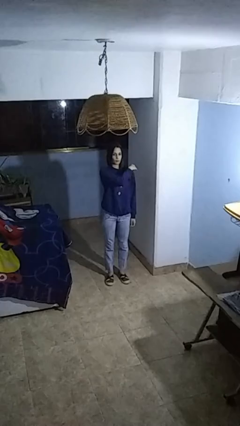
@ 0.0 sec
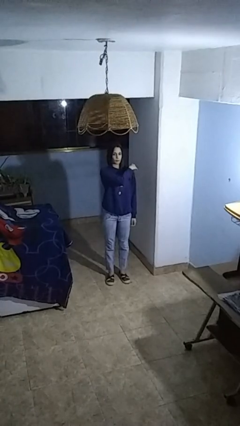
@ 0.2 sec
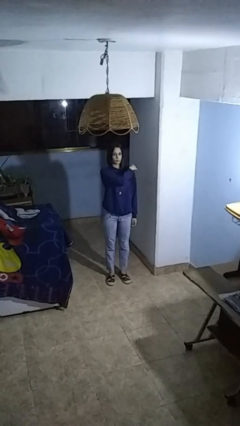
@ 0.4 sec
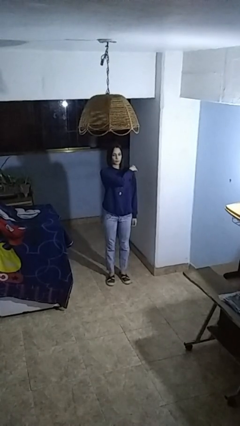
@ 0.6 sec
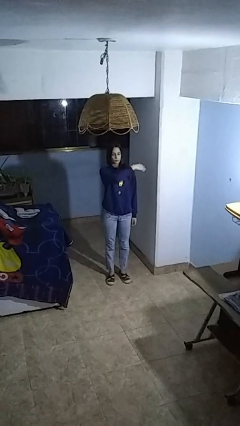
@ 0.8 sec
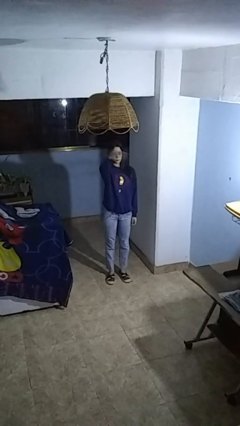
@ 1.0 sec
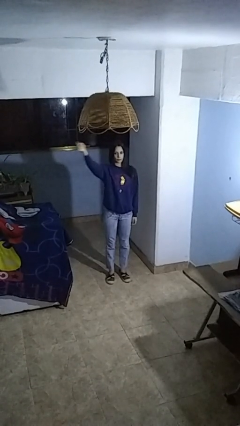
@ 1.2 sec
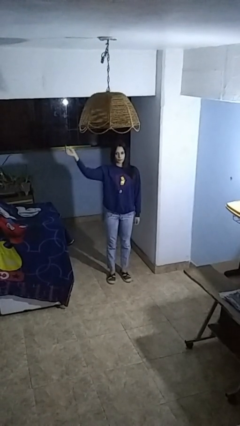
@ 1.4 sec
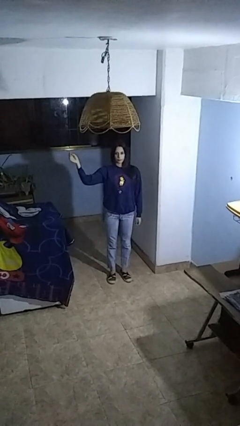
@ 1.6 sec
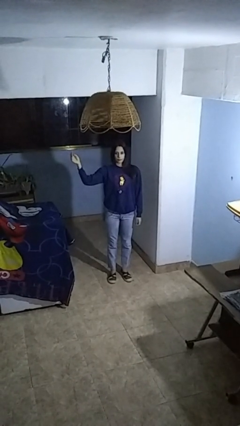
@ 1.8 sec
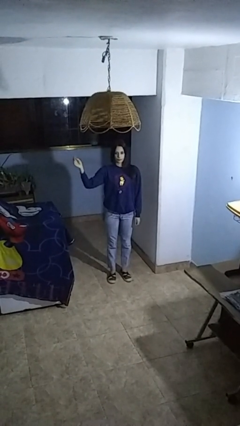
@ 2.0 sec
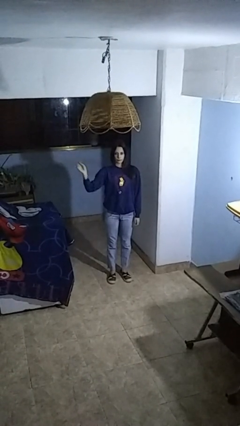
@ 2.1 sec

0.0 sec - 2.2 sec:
person gestures swipe right

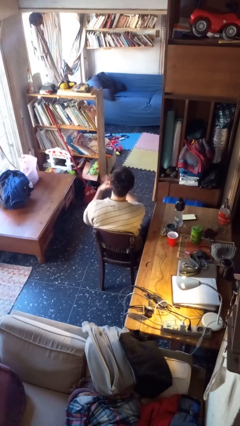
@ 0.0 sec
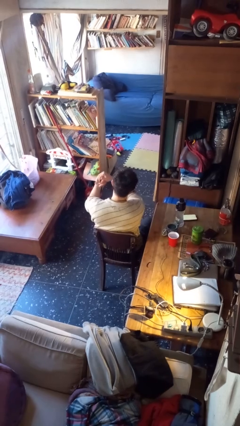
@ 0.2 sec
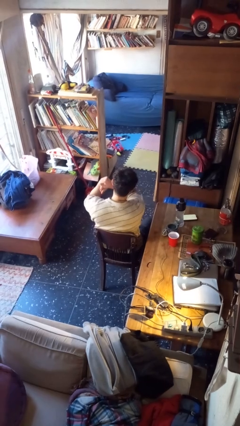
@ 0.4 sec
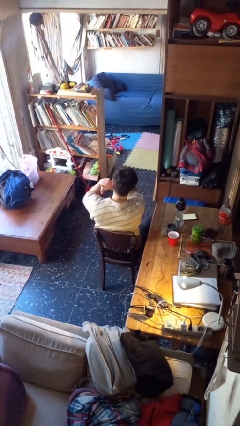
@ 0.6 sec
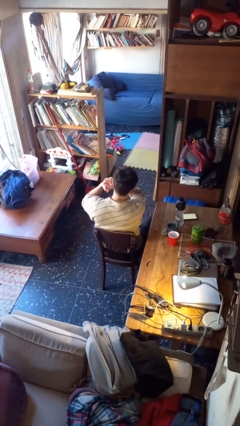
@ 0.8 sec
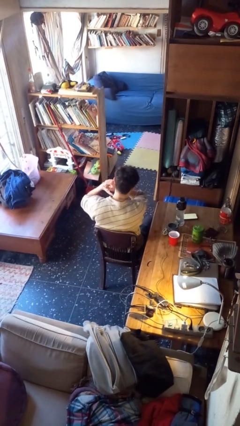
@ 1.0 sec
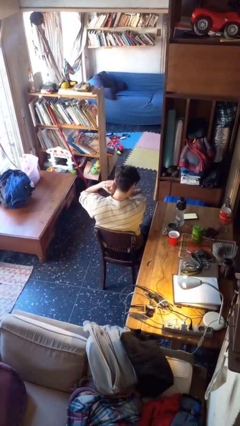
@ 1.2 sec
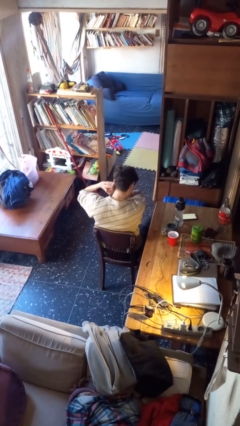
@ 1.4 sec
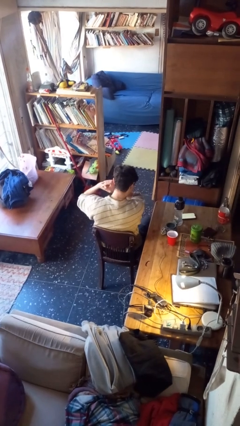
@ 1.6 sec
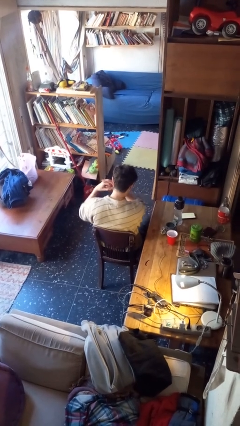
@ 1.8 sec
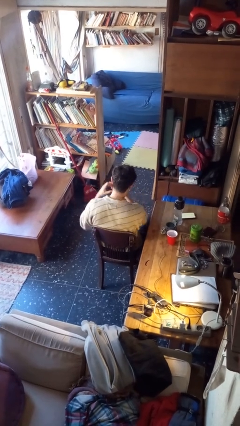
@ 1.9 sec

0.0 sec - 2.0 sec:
person snaps fingers

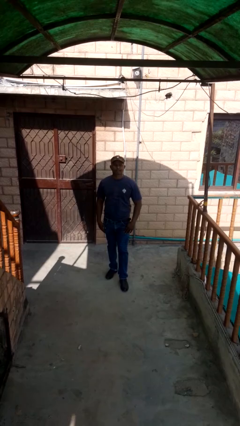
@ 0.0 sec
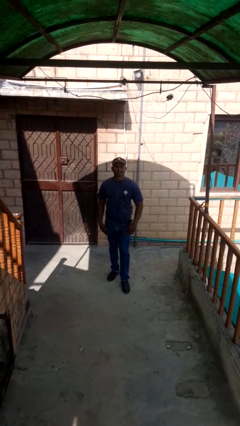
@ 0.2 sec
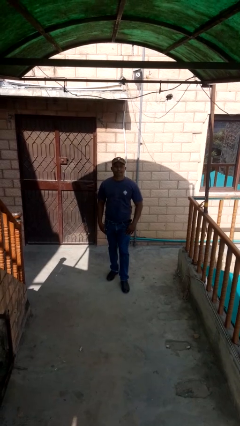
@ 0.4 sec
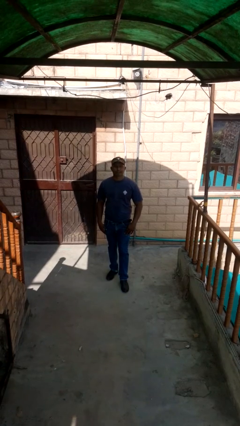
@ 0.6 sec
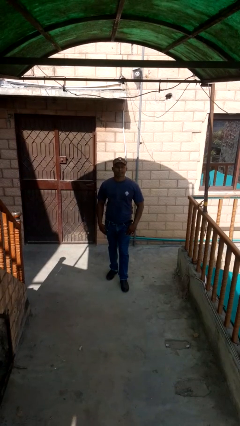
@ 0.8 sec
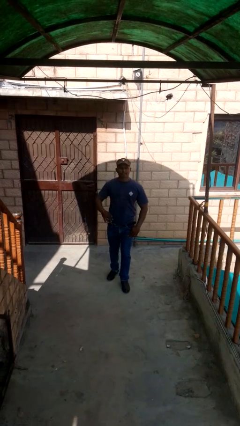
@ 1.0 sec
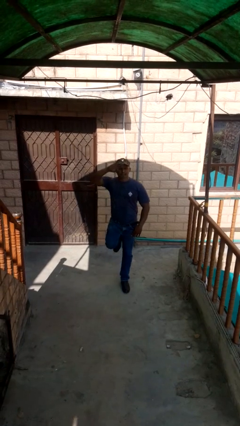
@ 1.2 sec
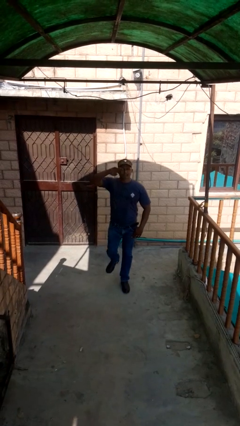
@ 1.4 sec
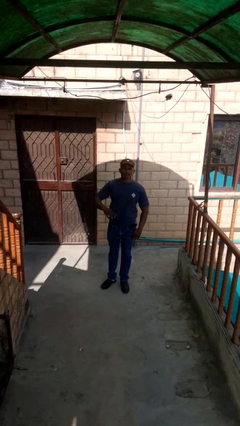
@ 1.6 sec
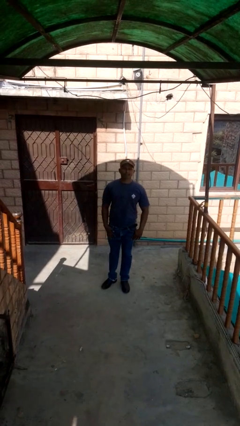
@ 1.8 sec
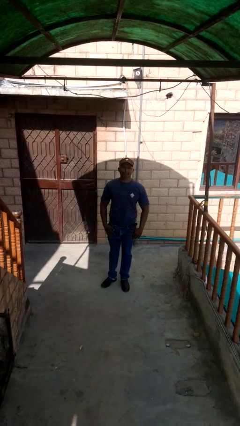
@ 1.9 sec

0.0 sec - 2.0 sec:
person salutes

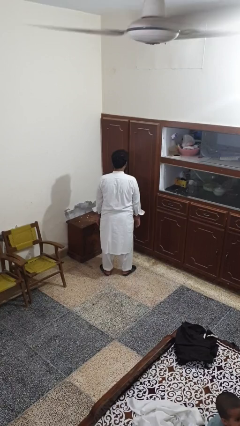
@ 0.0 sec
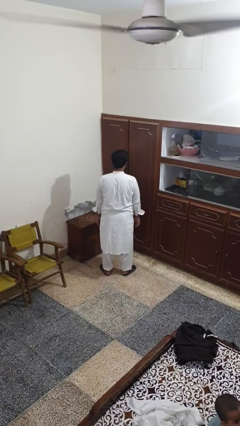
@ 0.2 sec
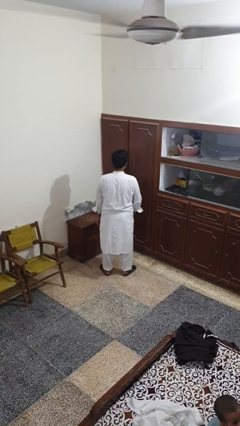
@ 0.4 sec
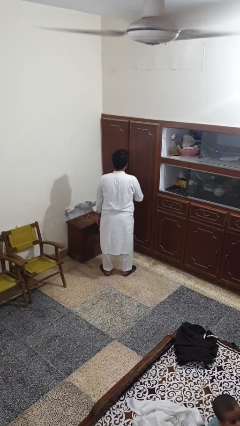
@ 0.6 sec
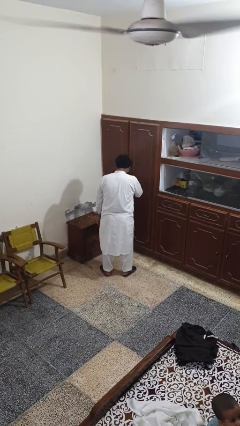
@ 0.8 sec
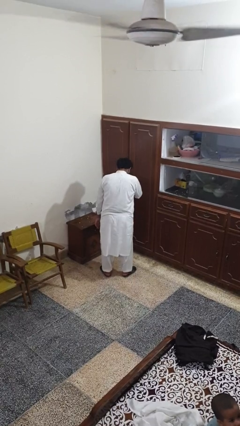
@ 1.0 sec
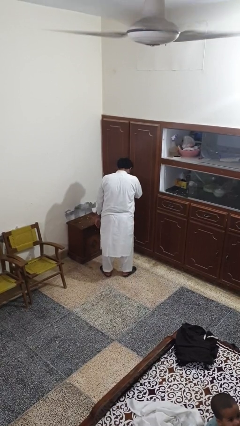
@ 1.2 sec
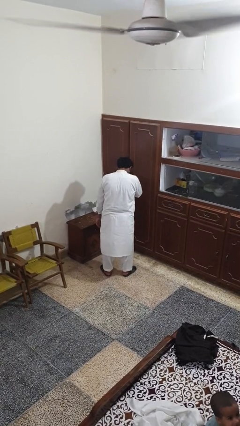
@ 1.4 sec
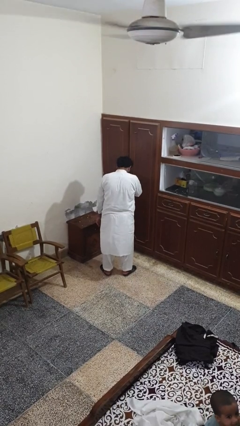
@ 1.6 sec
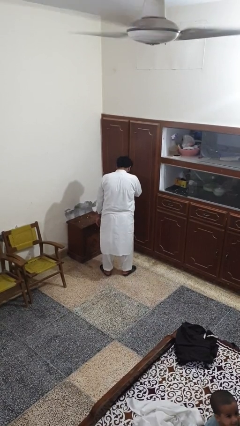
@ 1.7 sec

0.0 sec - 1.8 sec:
person sneezes into hand

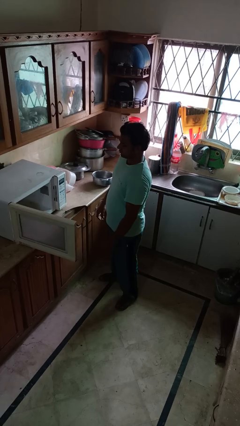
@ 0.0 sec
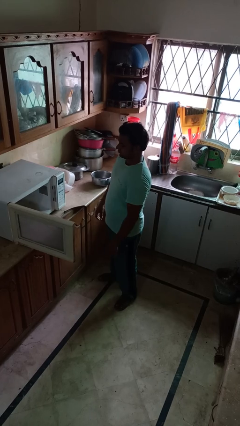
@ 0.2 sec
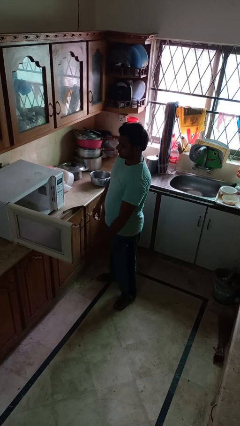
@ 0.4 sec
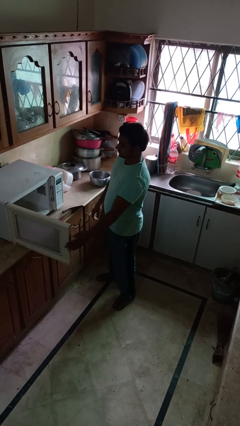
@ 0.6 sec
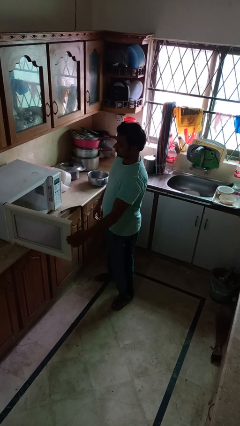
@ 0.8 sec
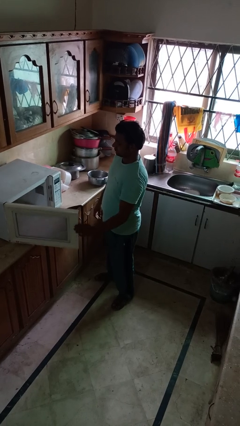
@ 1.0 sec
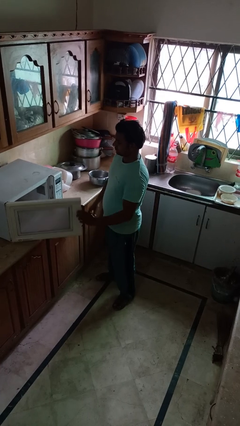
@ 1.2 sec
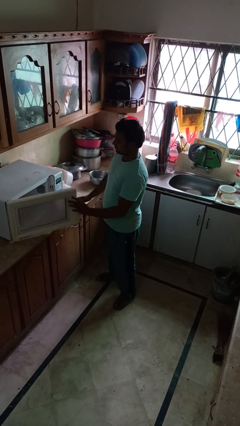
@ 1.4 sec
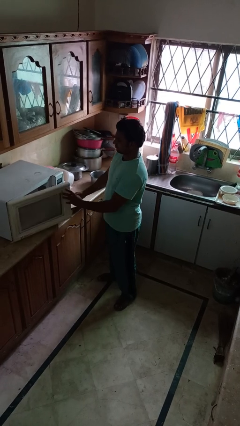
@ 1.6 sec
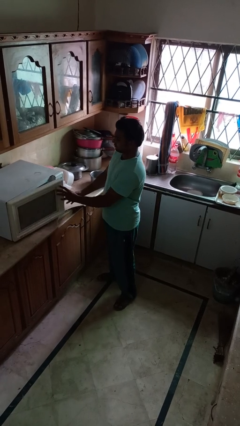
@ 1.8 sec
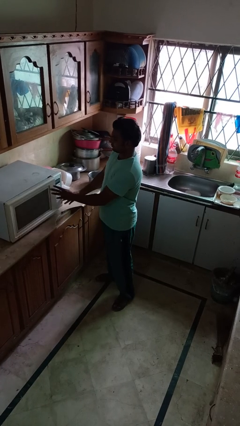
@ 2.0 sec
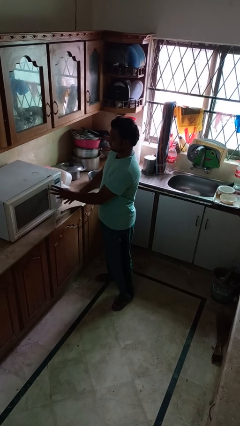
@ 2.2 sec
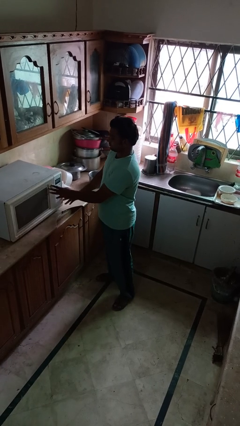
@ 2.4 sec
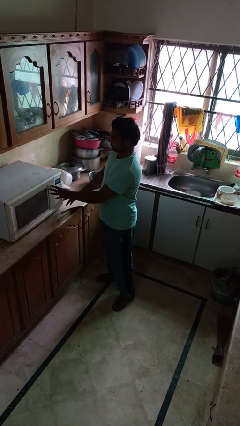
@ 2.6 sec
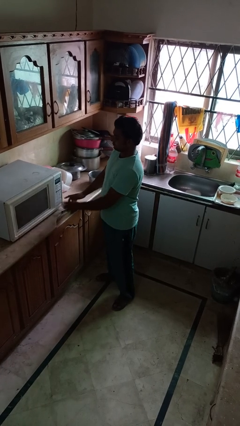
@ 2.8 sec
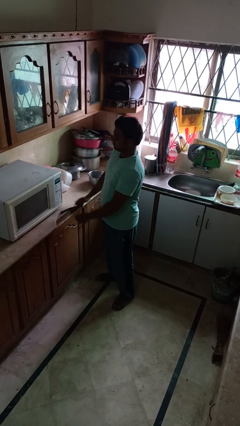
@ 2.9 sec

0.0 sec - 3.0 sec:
person closes microwave

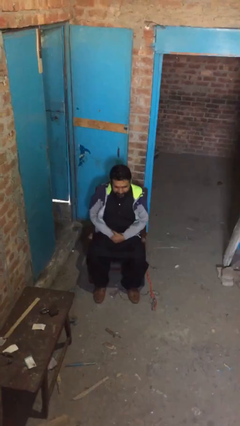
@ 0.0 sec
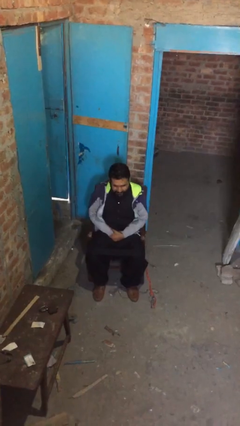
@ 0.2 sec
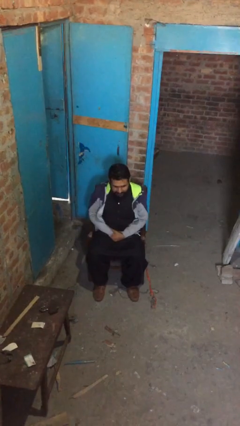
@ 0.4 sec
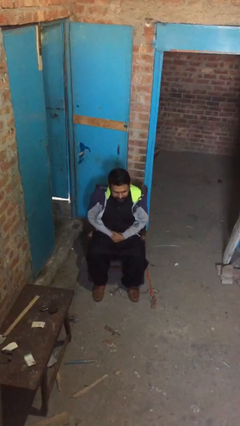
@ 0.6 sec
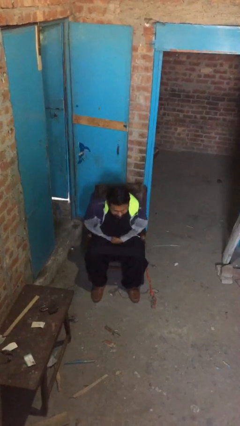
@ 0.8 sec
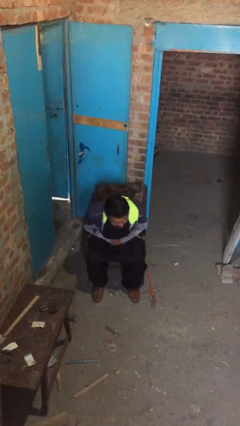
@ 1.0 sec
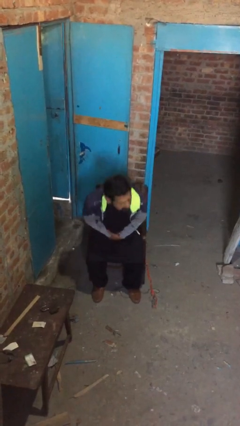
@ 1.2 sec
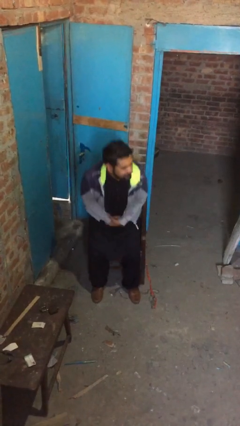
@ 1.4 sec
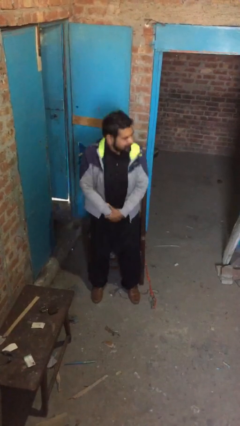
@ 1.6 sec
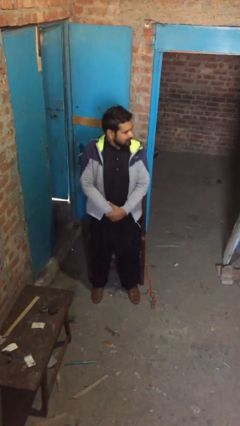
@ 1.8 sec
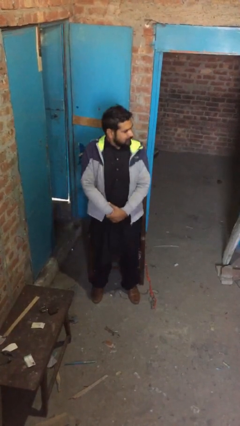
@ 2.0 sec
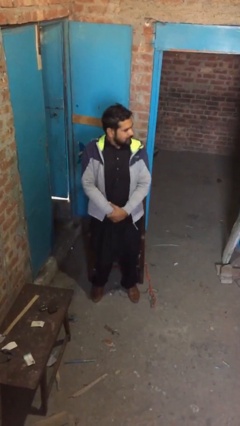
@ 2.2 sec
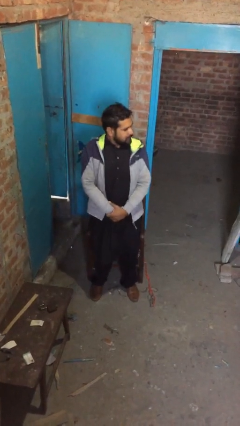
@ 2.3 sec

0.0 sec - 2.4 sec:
person stands up

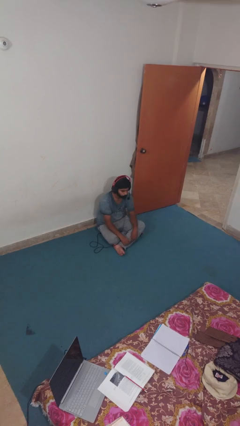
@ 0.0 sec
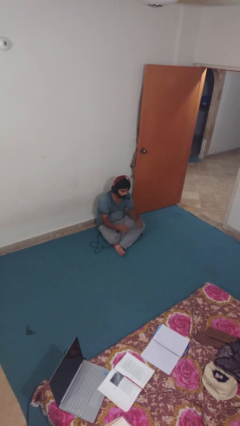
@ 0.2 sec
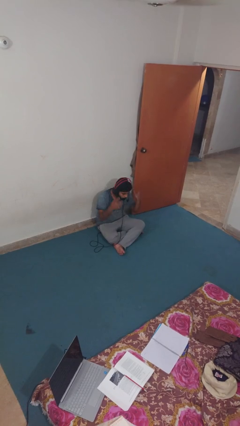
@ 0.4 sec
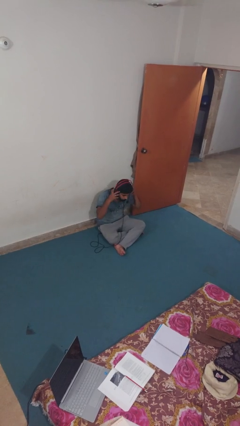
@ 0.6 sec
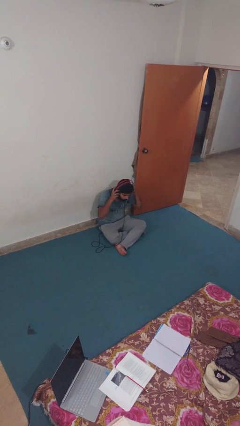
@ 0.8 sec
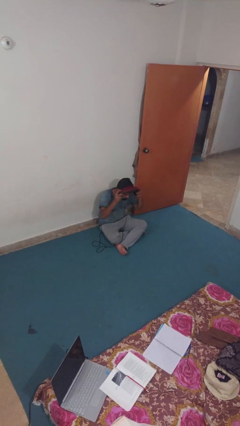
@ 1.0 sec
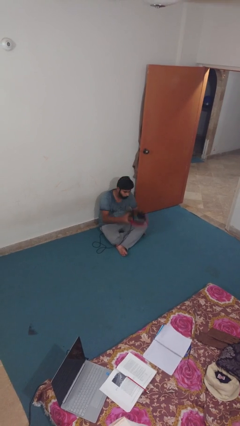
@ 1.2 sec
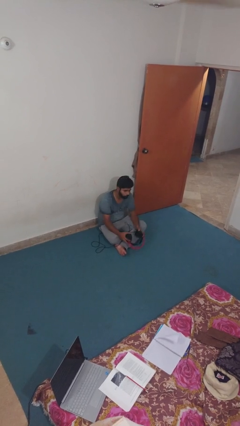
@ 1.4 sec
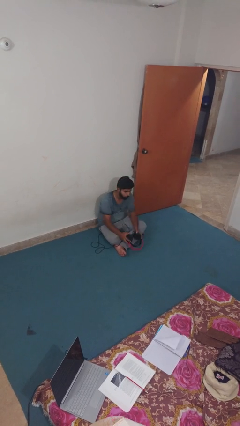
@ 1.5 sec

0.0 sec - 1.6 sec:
person takes off headphones

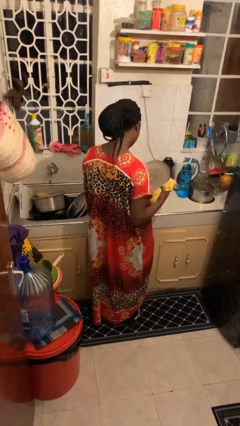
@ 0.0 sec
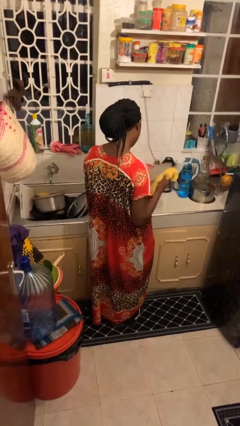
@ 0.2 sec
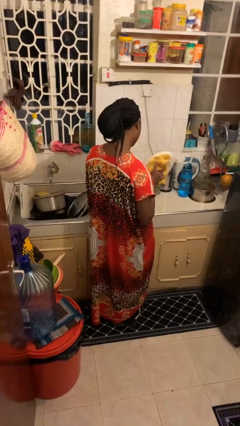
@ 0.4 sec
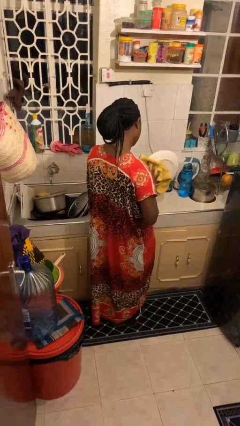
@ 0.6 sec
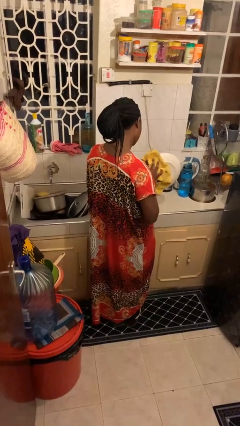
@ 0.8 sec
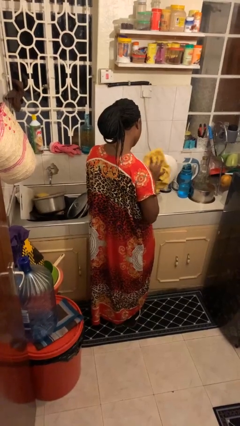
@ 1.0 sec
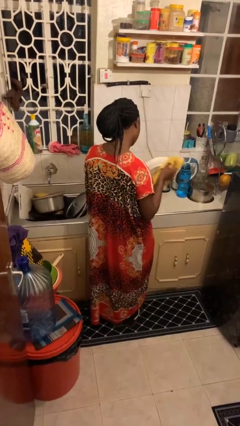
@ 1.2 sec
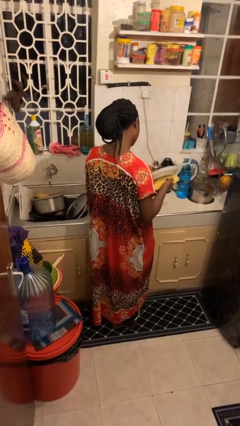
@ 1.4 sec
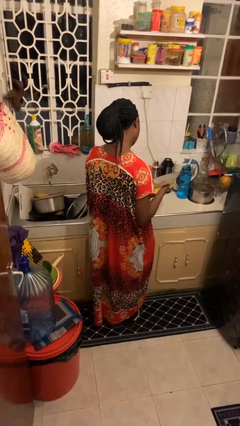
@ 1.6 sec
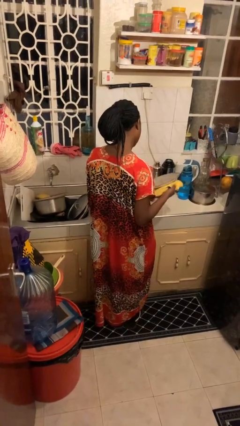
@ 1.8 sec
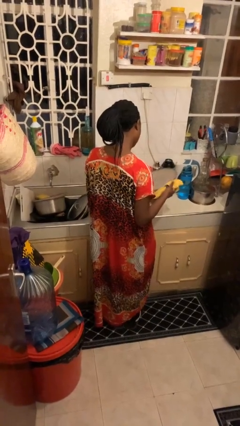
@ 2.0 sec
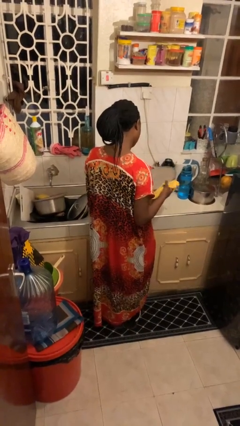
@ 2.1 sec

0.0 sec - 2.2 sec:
person dries dish
